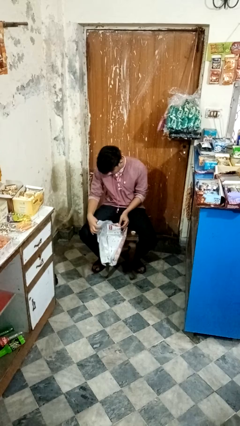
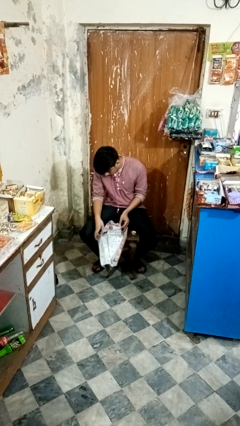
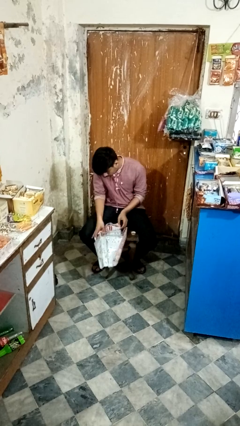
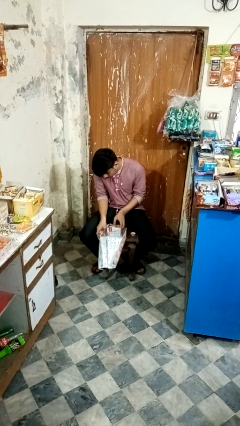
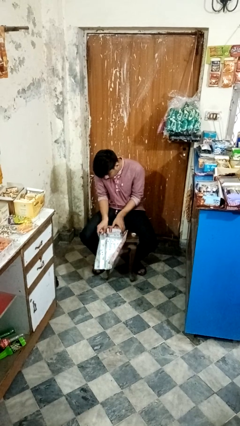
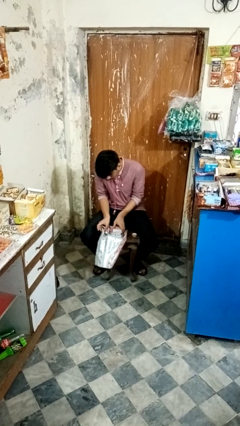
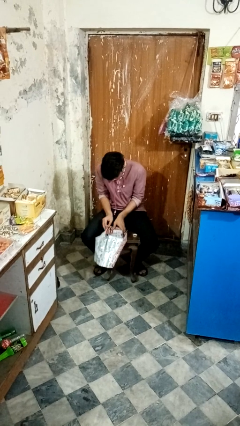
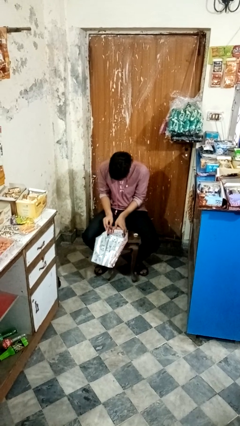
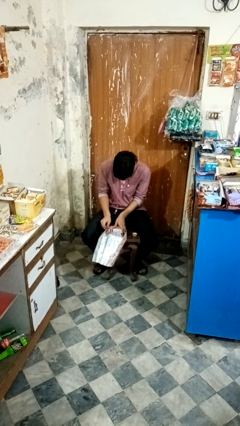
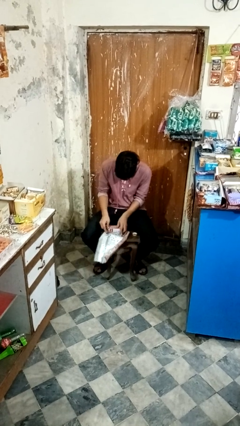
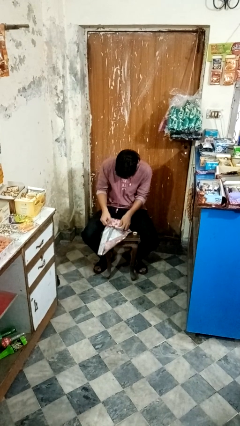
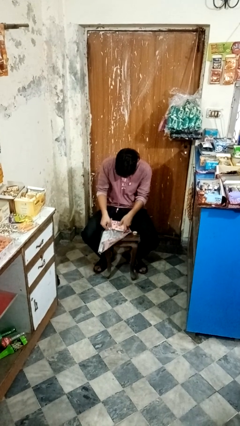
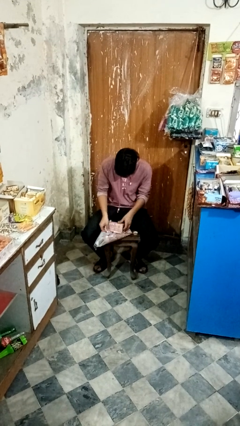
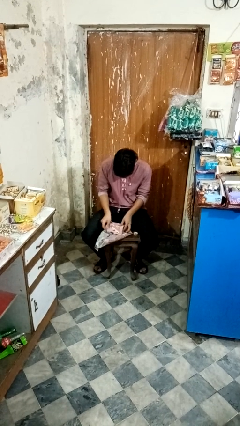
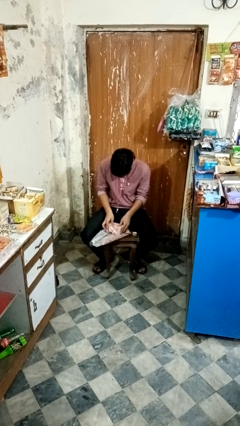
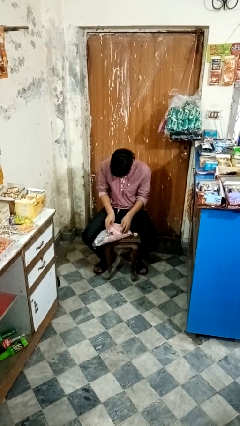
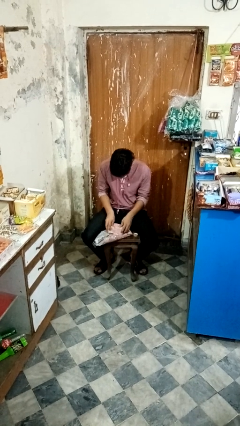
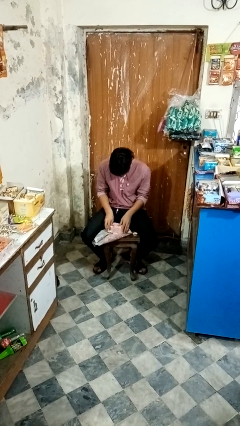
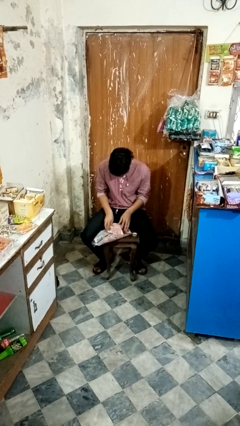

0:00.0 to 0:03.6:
person wraps box

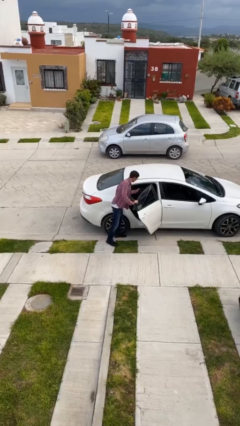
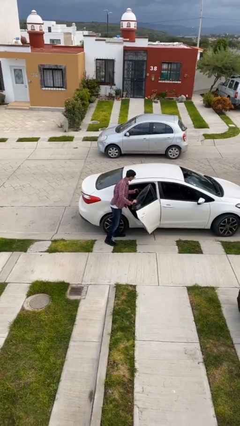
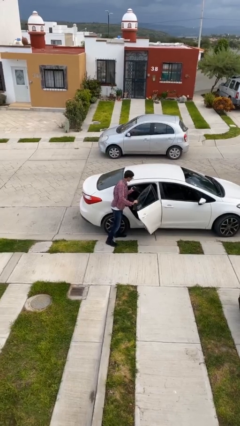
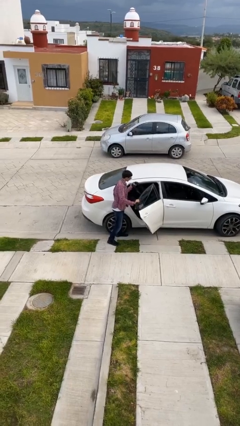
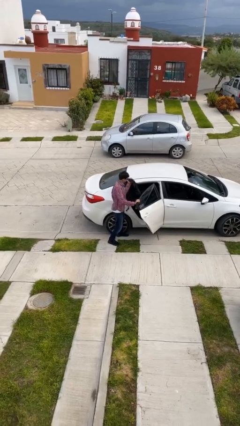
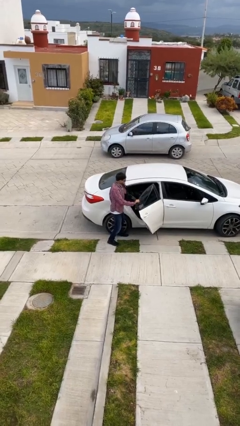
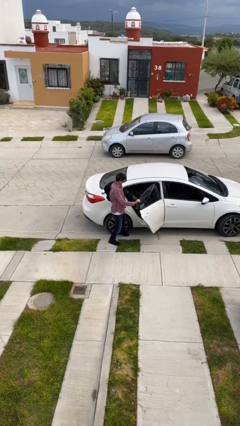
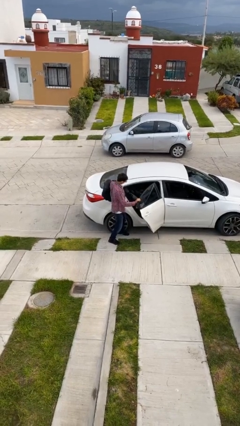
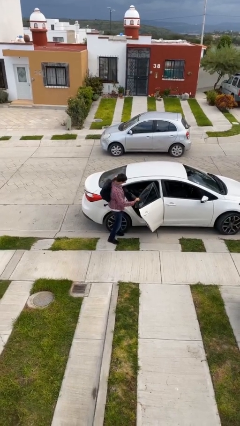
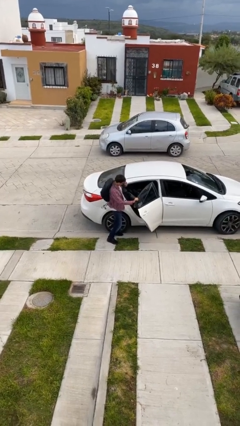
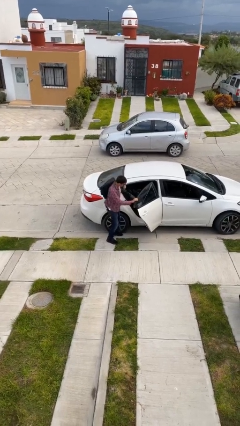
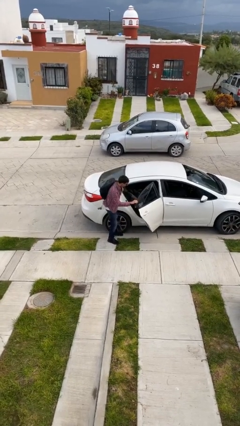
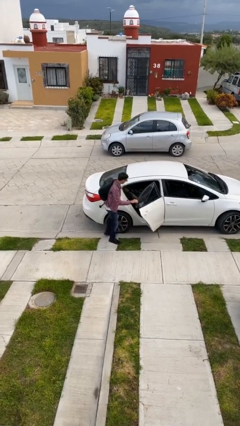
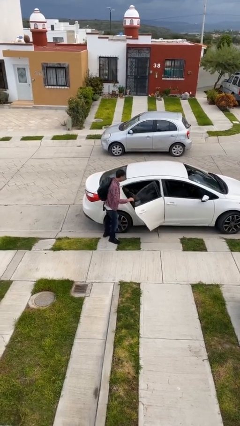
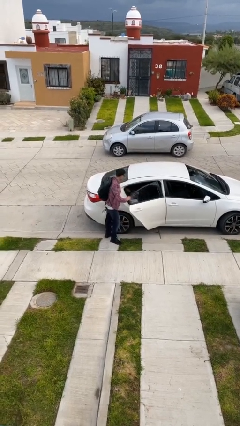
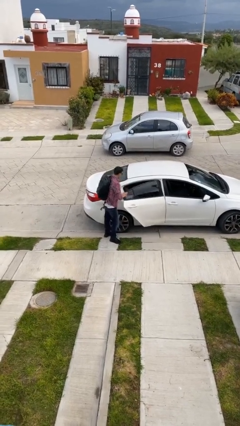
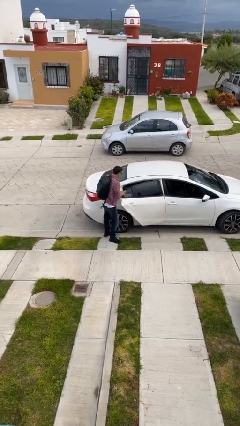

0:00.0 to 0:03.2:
person unloads car

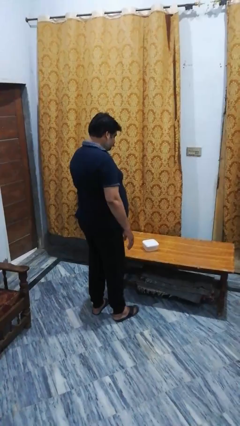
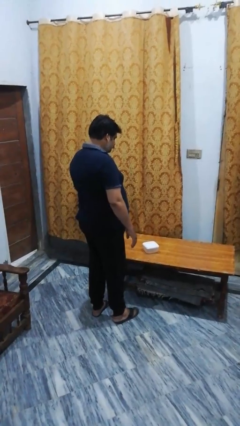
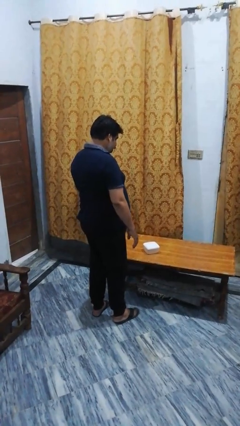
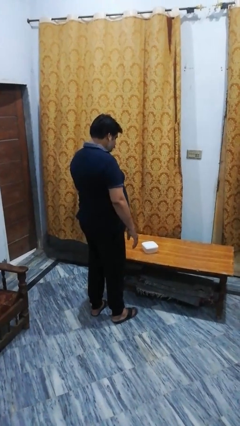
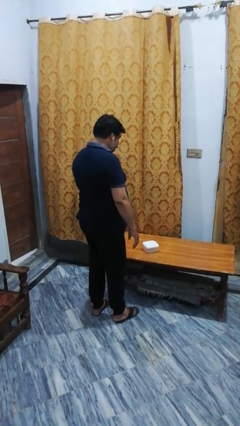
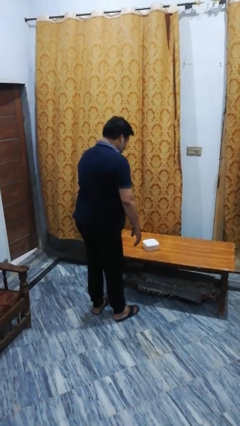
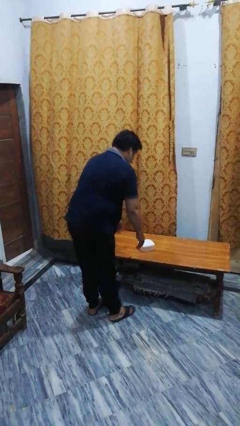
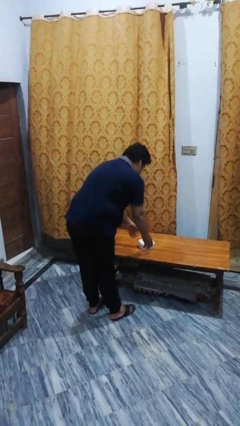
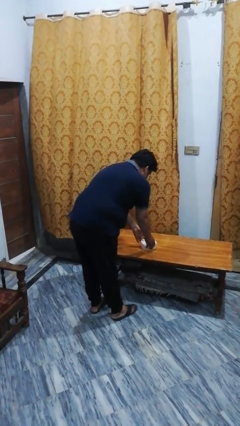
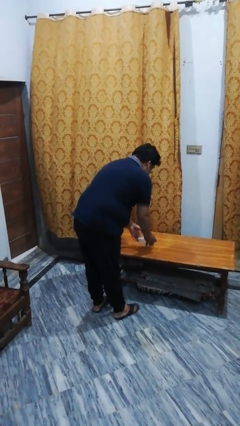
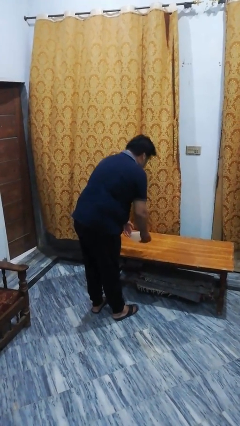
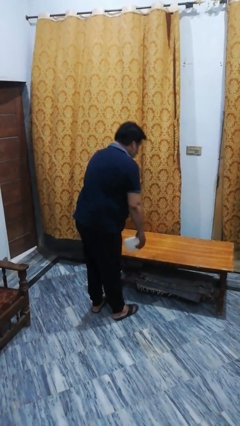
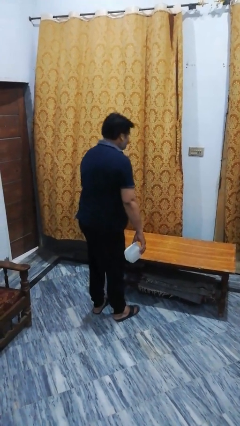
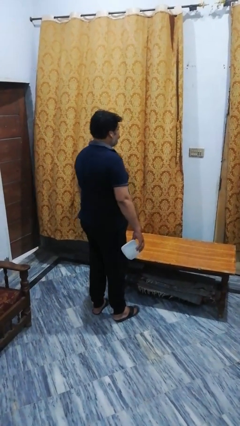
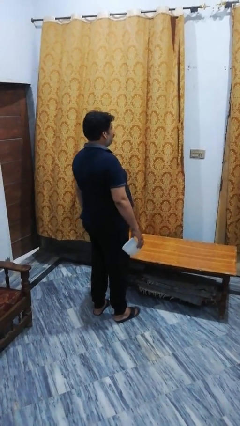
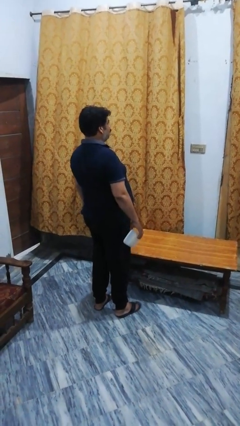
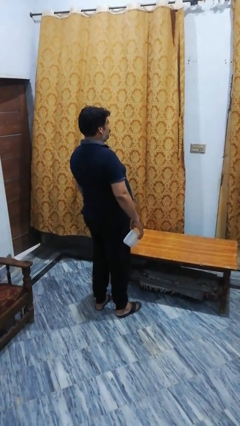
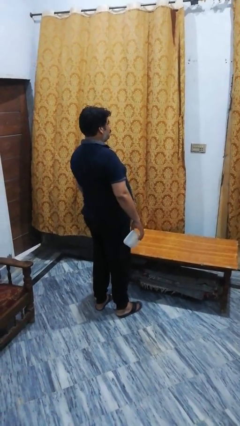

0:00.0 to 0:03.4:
person picks up object from table

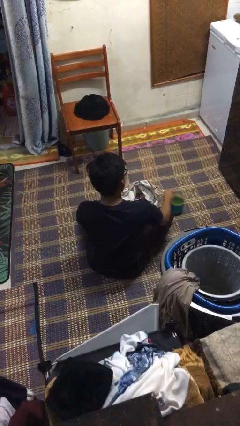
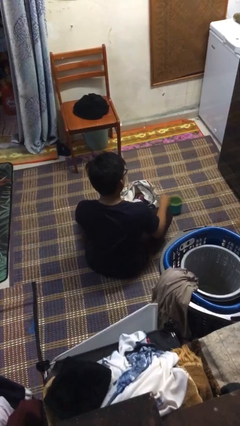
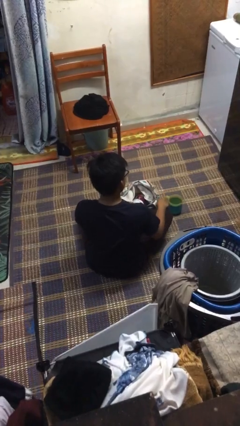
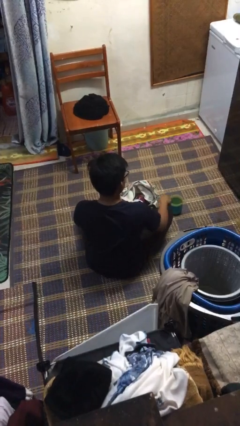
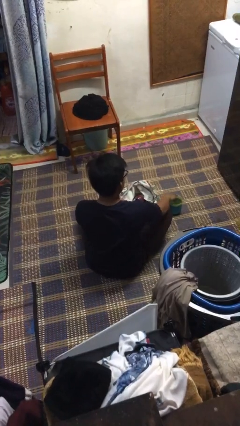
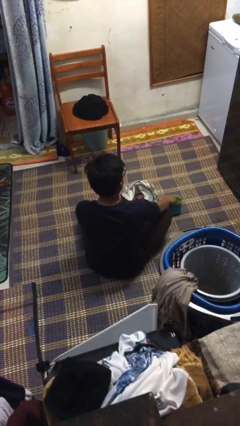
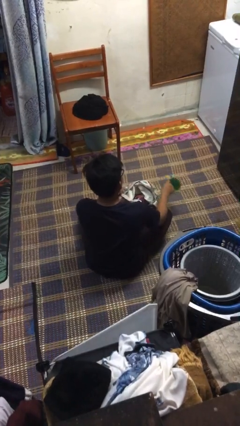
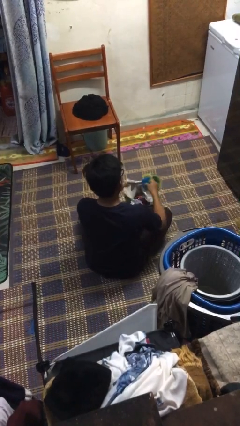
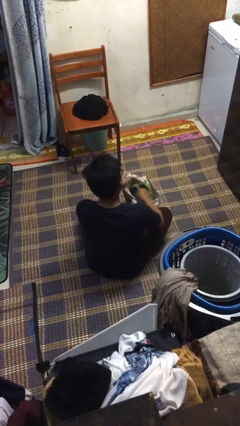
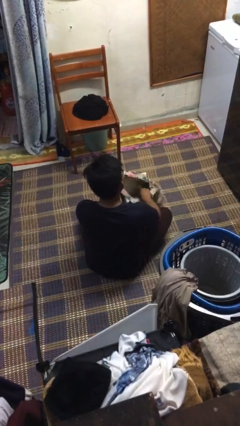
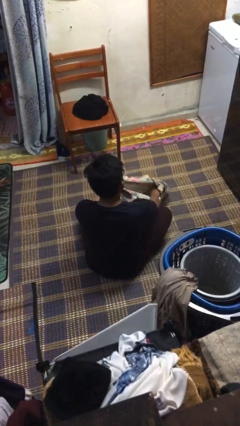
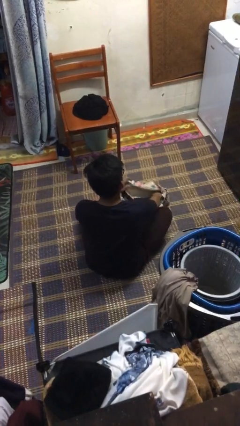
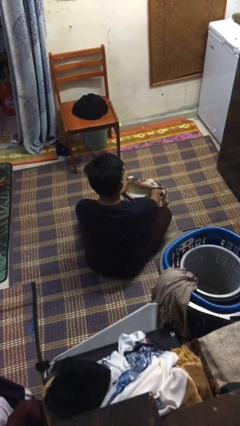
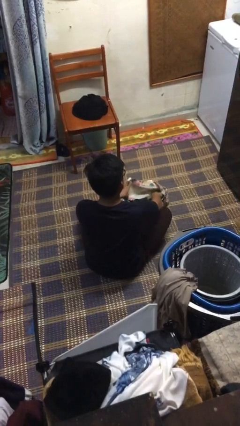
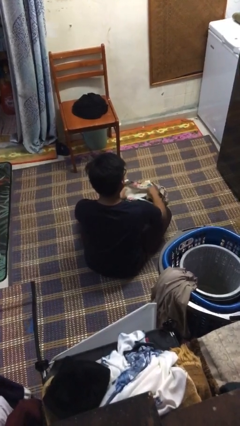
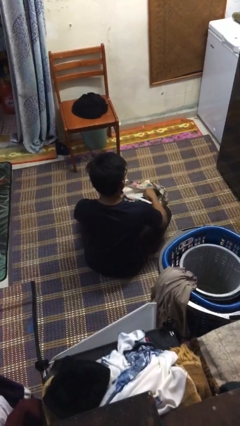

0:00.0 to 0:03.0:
person puts object into bag

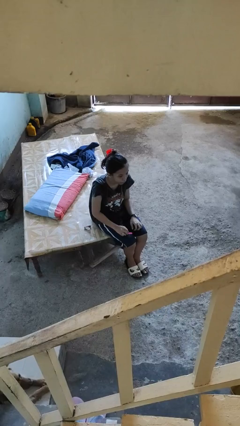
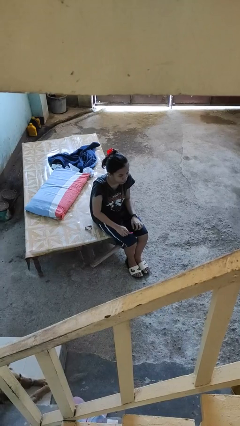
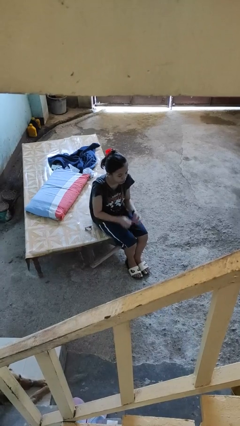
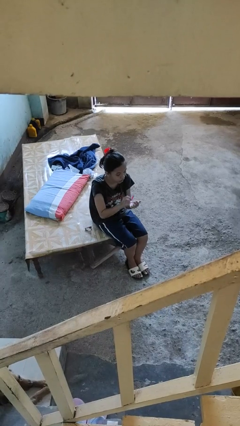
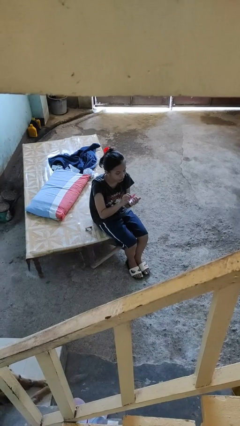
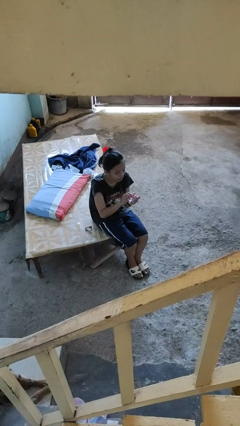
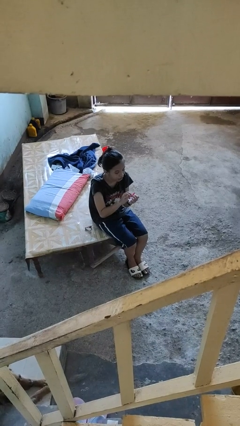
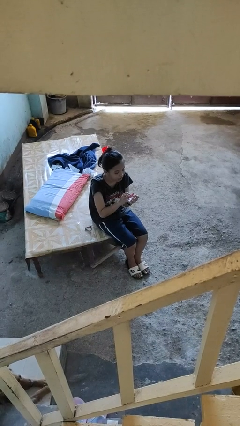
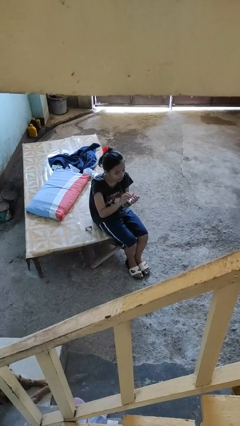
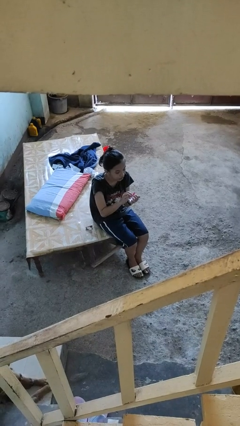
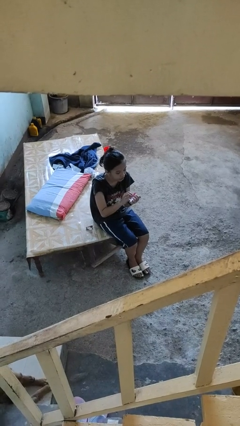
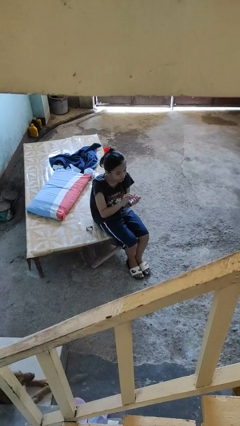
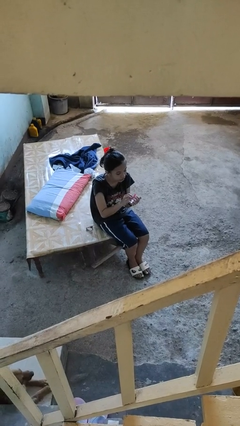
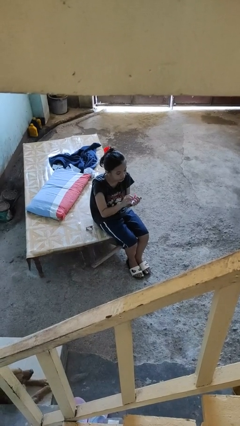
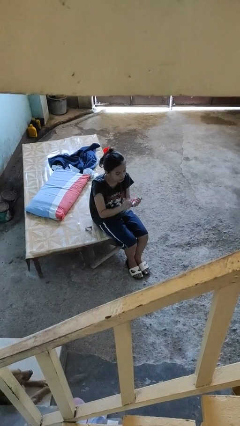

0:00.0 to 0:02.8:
person files fingernails

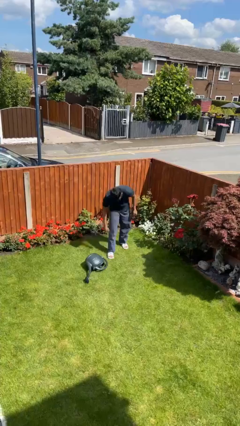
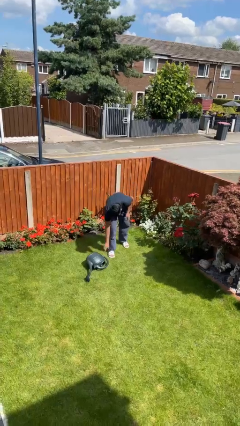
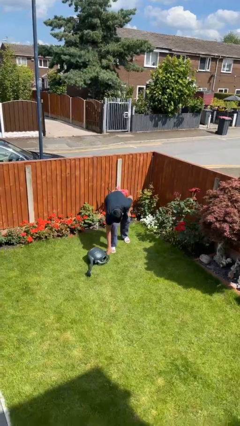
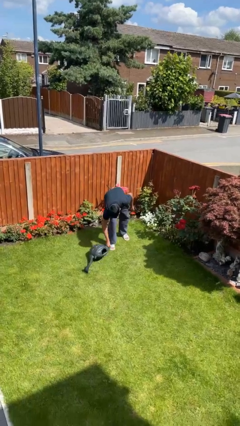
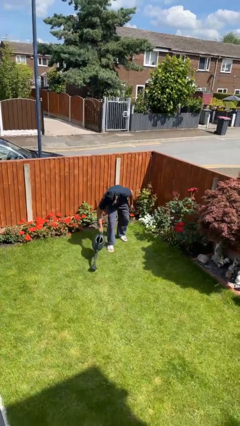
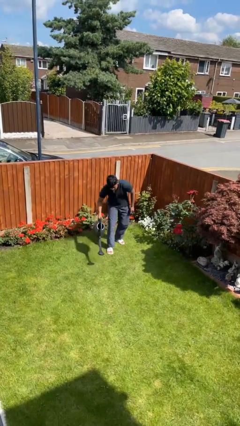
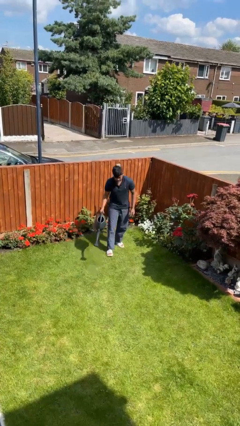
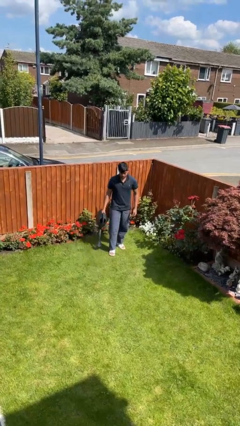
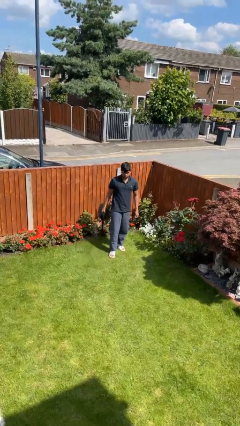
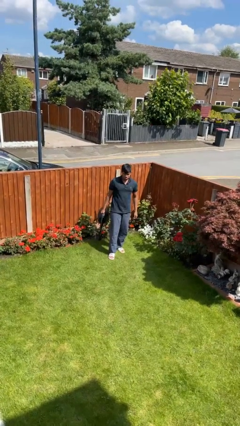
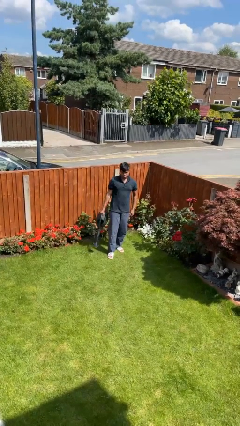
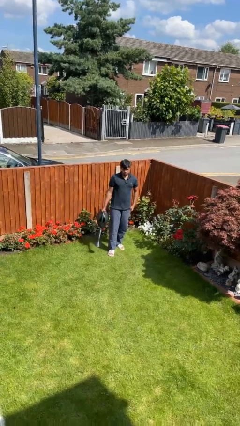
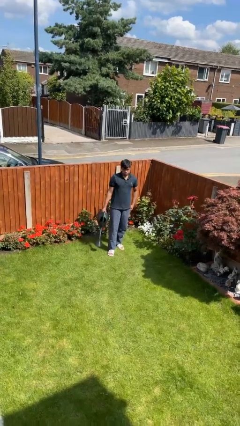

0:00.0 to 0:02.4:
person picks up object from floor
